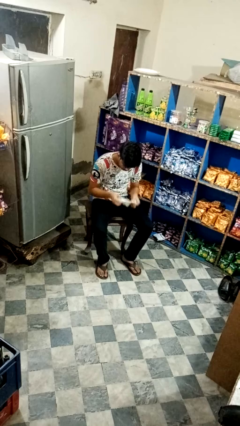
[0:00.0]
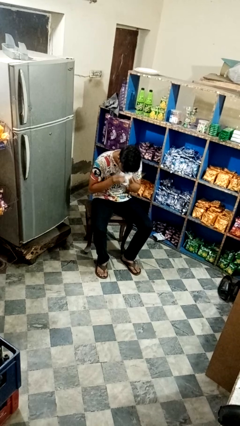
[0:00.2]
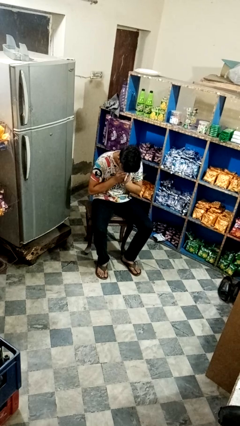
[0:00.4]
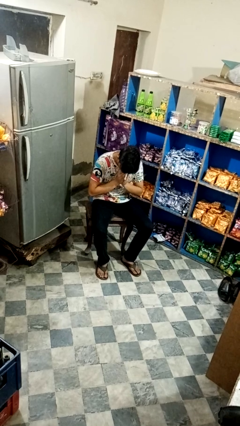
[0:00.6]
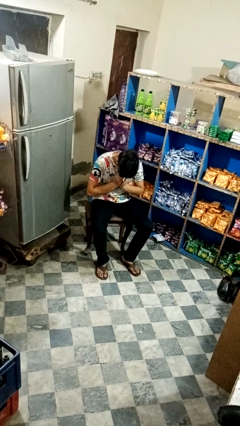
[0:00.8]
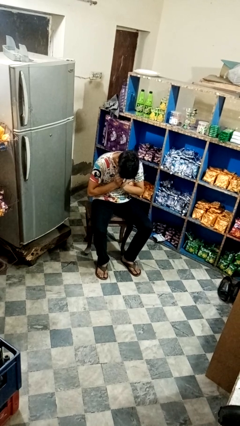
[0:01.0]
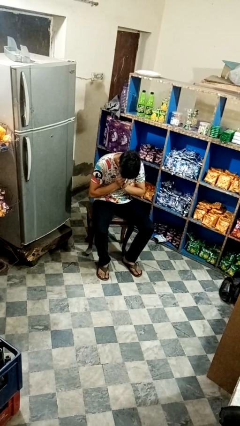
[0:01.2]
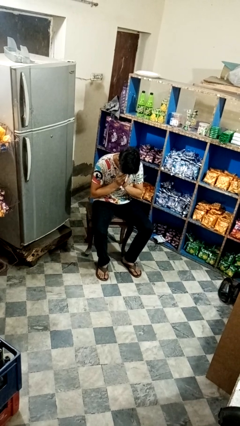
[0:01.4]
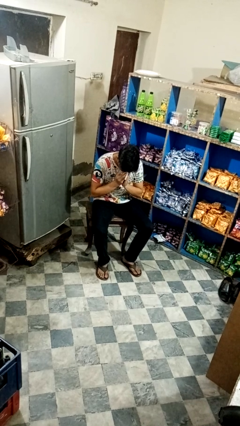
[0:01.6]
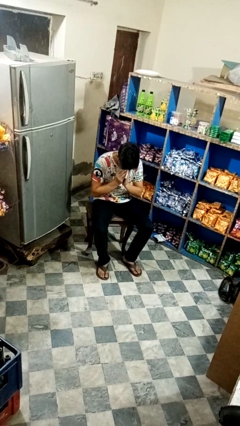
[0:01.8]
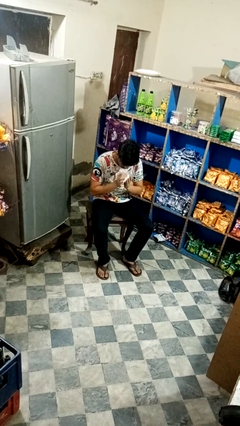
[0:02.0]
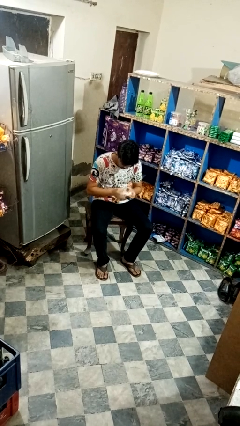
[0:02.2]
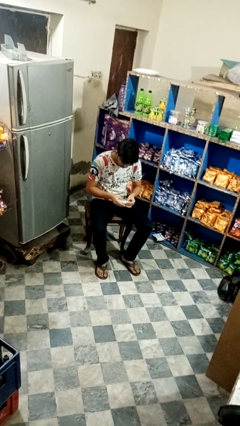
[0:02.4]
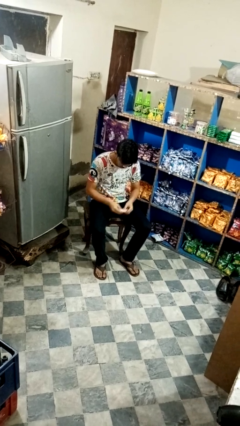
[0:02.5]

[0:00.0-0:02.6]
person blows nose

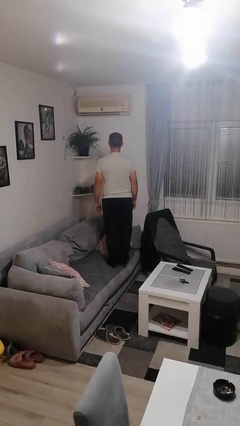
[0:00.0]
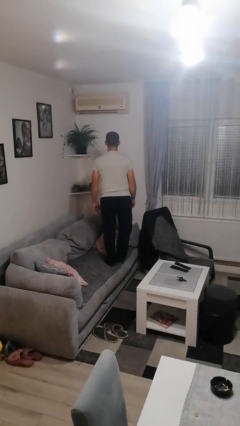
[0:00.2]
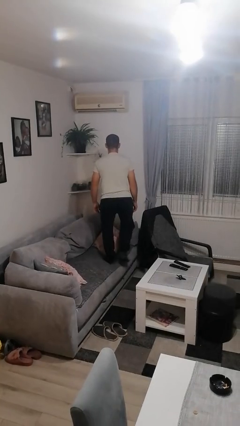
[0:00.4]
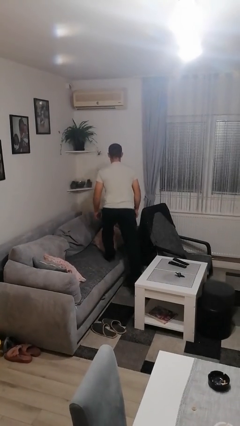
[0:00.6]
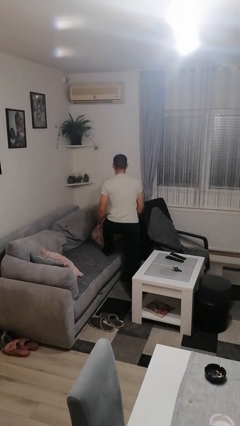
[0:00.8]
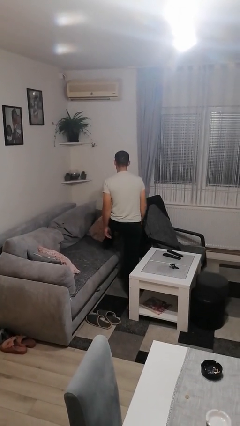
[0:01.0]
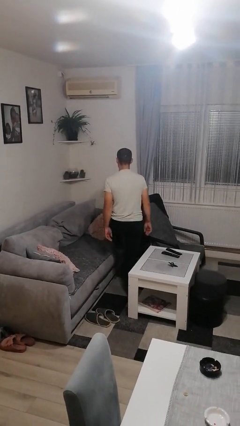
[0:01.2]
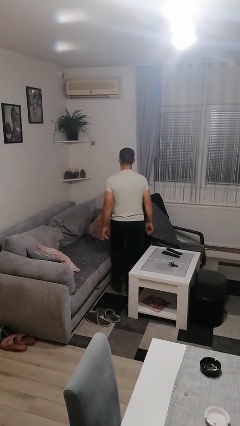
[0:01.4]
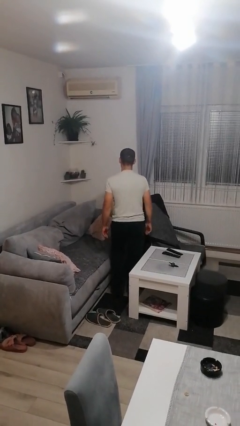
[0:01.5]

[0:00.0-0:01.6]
person climbs off couch

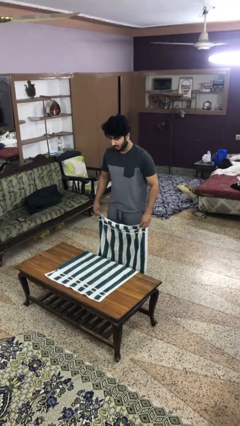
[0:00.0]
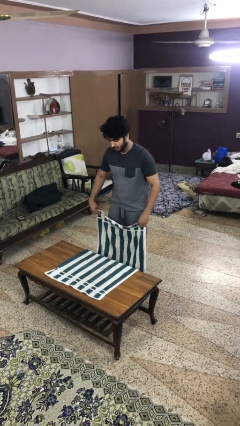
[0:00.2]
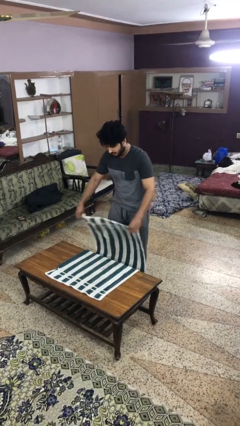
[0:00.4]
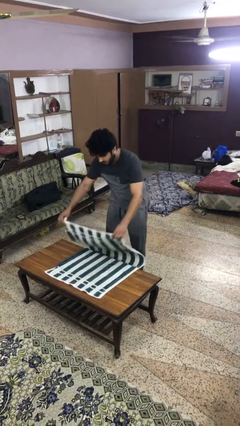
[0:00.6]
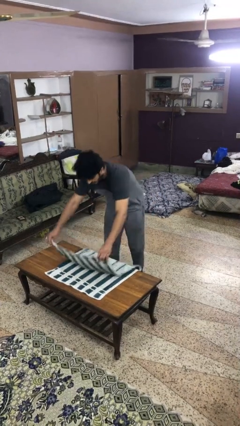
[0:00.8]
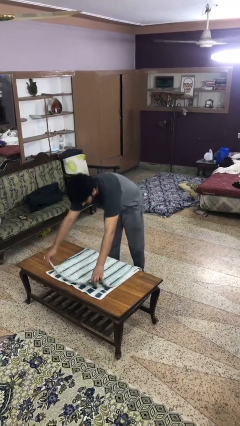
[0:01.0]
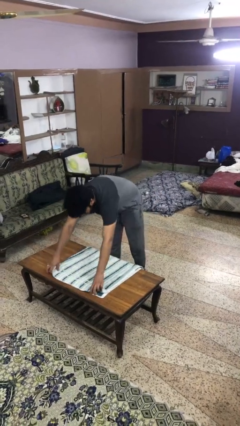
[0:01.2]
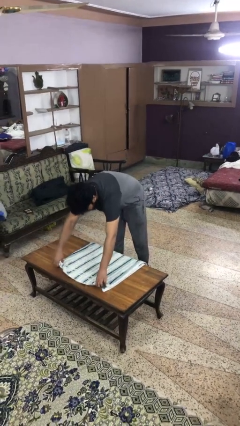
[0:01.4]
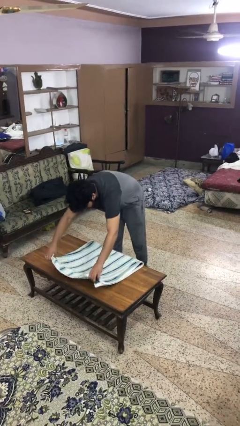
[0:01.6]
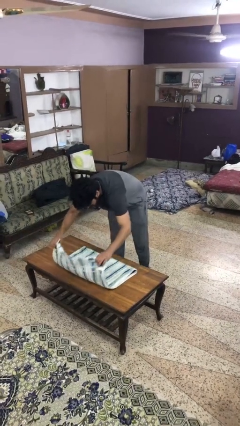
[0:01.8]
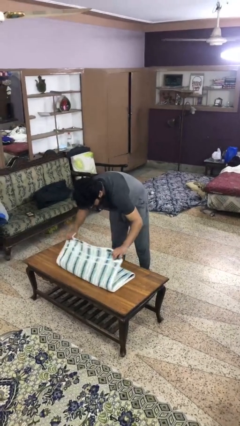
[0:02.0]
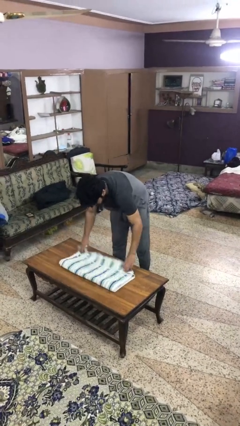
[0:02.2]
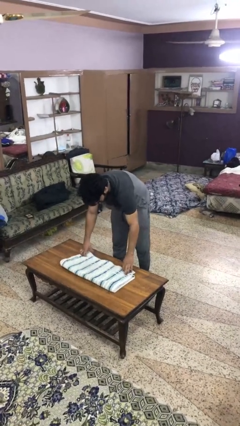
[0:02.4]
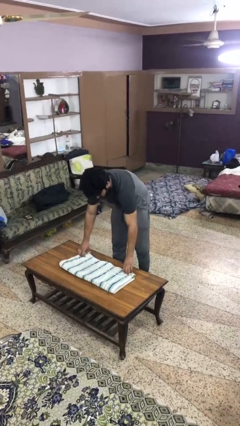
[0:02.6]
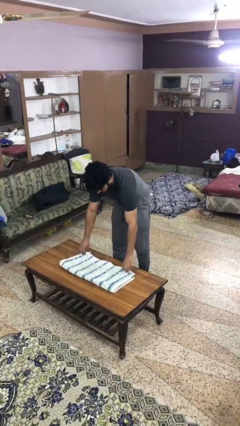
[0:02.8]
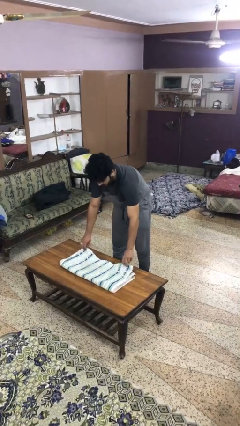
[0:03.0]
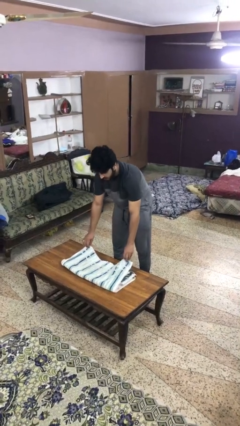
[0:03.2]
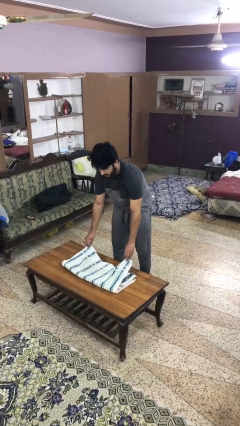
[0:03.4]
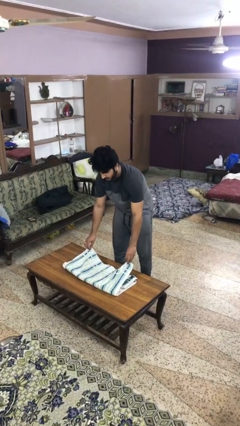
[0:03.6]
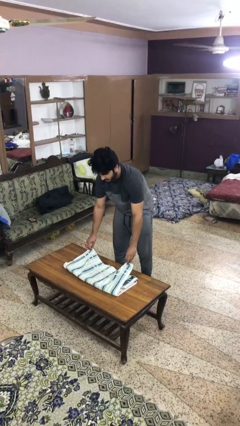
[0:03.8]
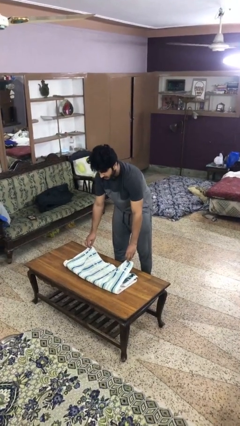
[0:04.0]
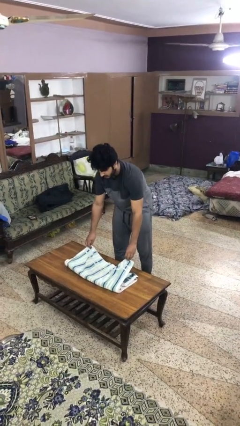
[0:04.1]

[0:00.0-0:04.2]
person folds towel

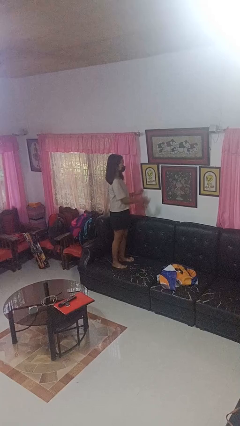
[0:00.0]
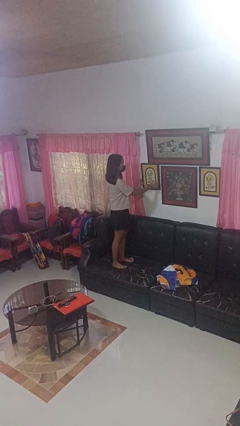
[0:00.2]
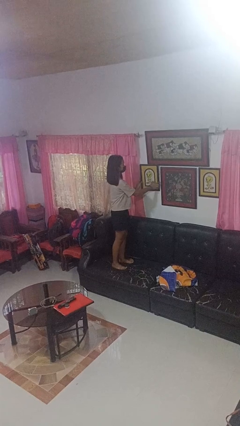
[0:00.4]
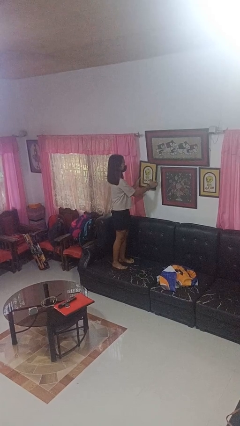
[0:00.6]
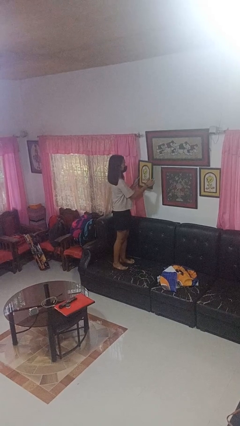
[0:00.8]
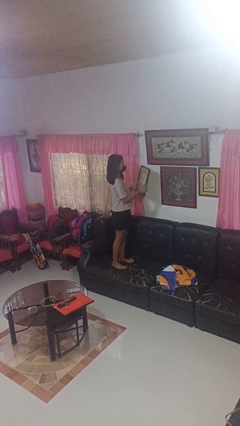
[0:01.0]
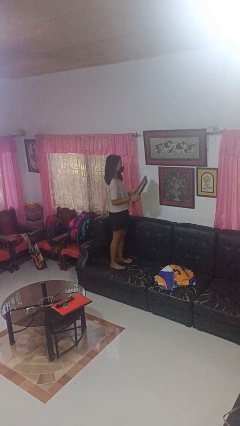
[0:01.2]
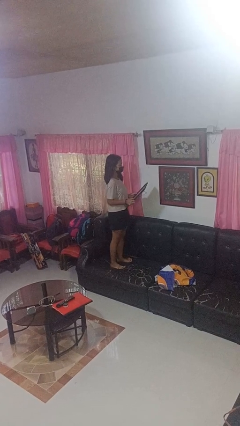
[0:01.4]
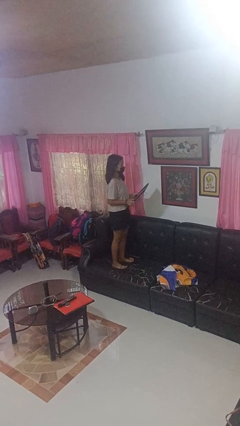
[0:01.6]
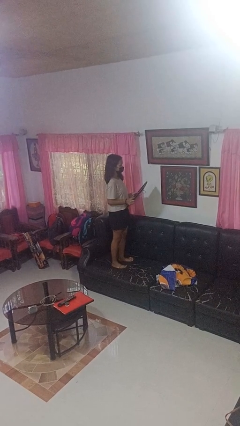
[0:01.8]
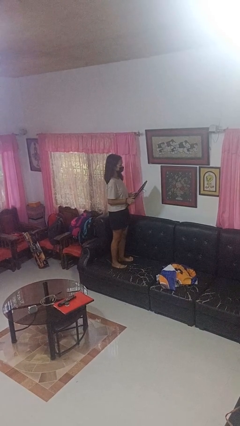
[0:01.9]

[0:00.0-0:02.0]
person takes down picture frame

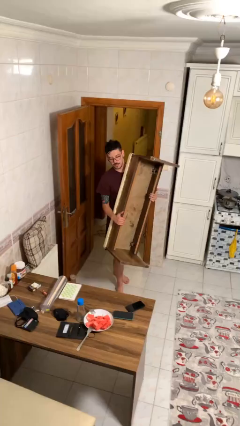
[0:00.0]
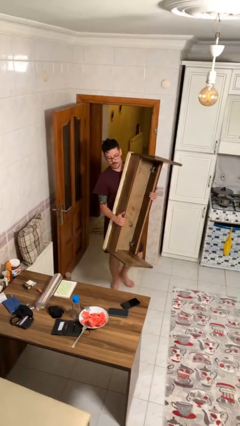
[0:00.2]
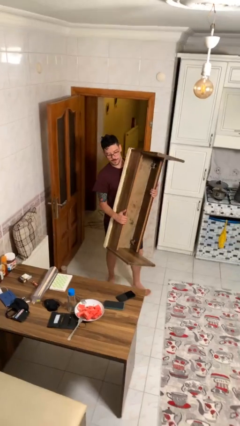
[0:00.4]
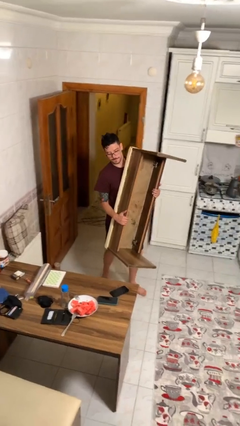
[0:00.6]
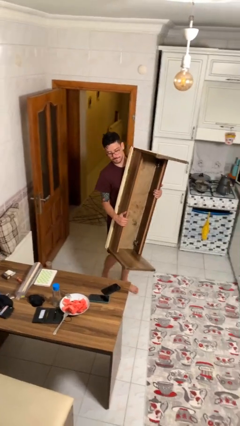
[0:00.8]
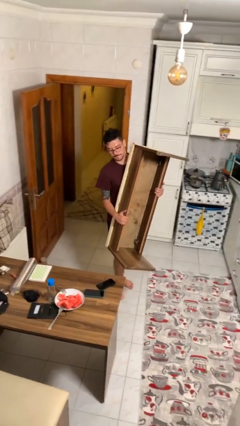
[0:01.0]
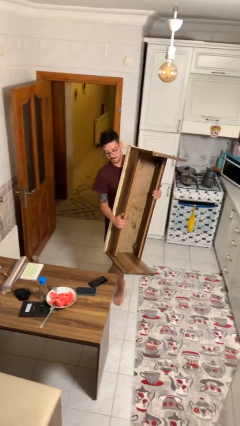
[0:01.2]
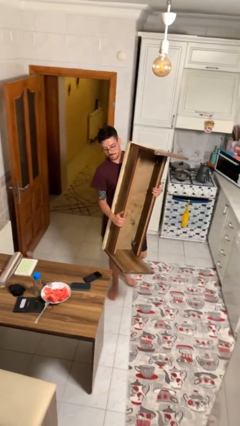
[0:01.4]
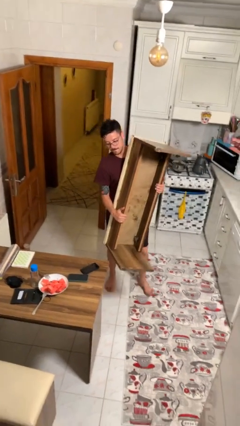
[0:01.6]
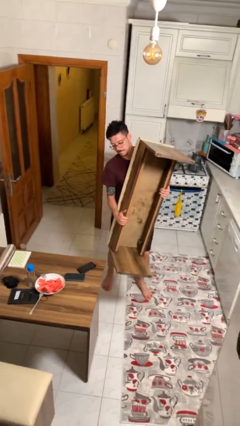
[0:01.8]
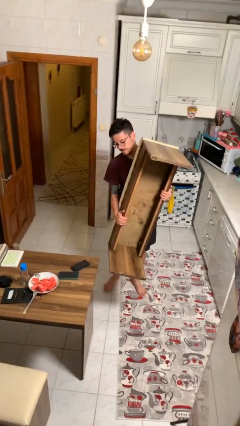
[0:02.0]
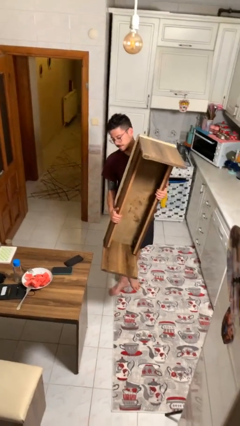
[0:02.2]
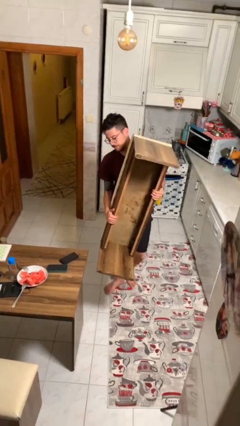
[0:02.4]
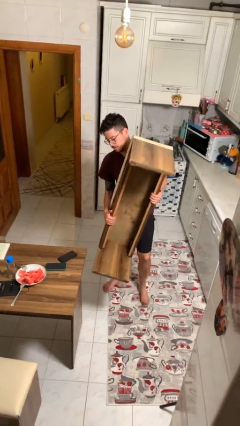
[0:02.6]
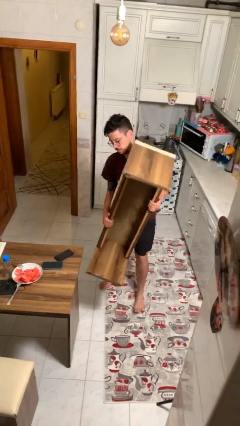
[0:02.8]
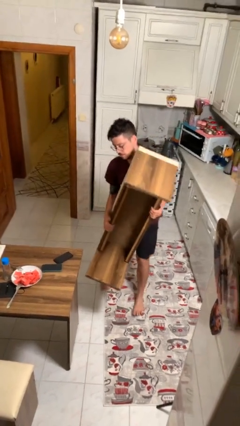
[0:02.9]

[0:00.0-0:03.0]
person carries heavy object

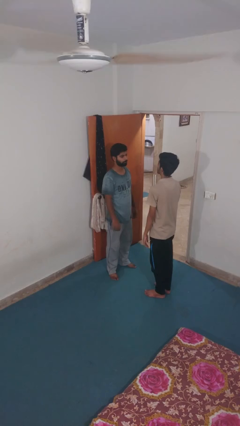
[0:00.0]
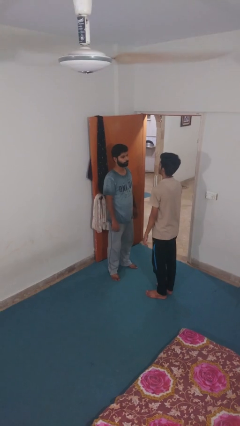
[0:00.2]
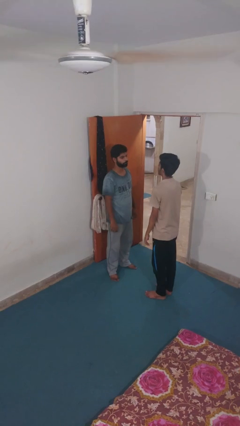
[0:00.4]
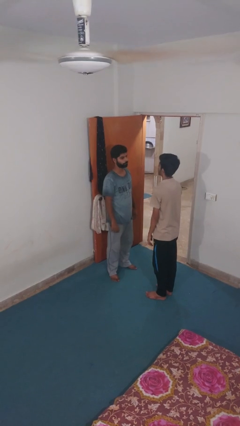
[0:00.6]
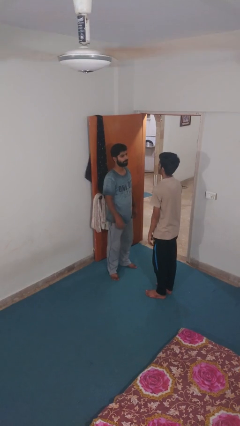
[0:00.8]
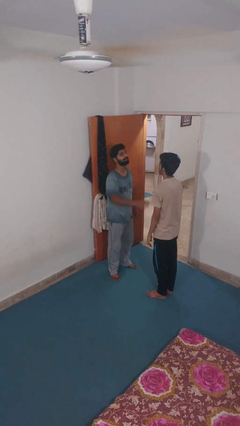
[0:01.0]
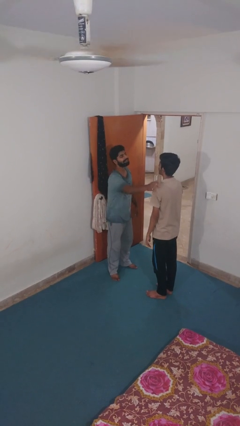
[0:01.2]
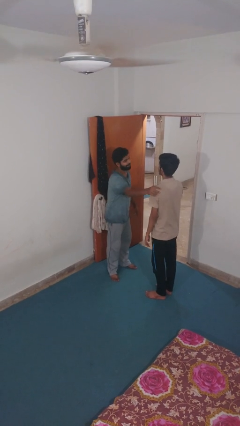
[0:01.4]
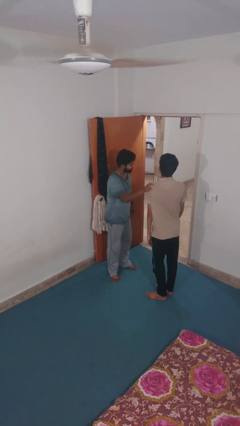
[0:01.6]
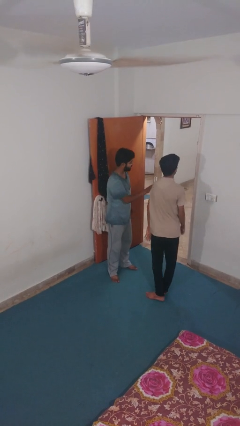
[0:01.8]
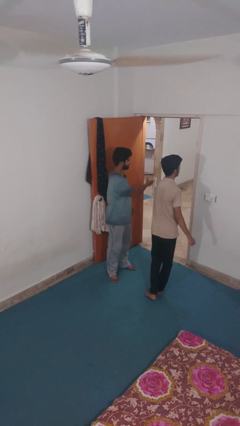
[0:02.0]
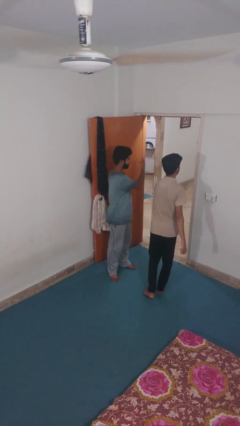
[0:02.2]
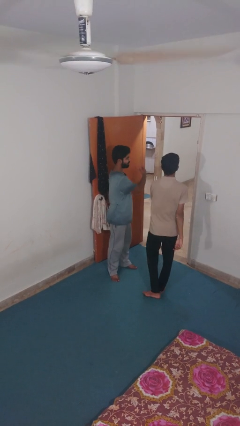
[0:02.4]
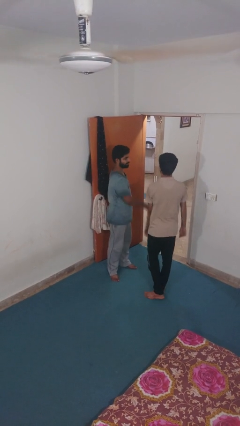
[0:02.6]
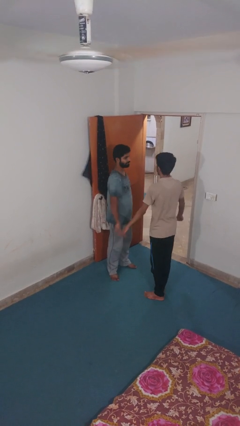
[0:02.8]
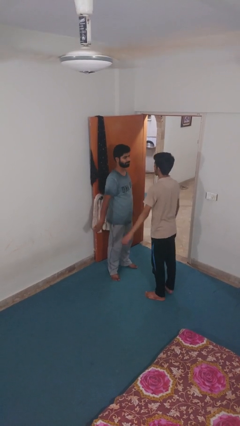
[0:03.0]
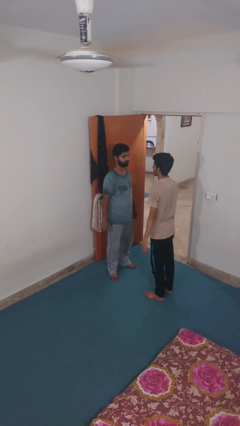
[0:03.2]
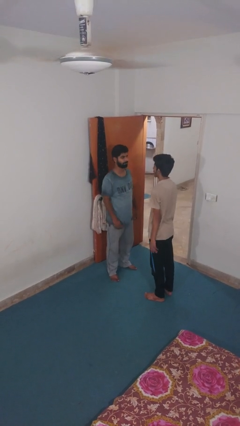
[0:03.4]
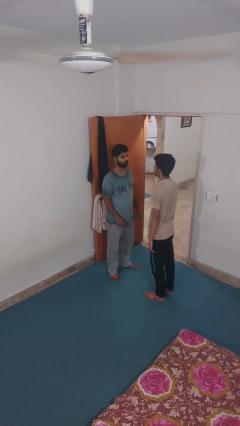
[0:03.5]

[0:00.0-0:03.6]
person shoves person

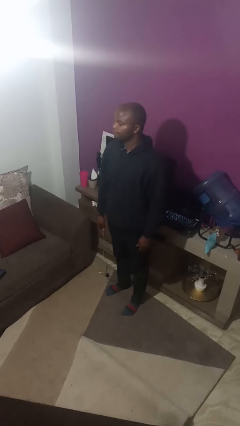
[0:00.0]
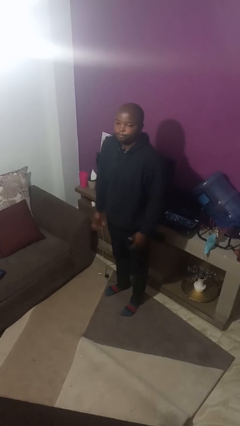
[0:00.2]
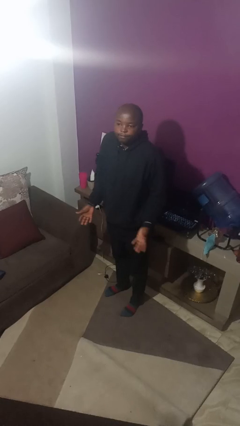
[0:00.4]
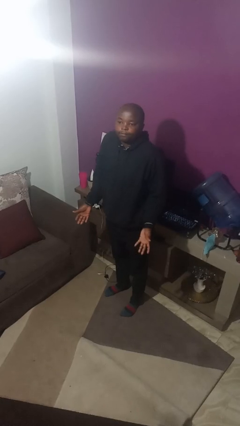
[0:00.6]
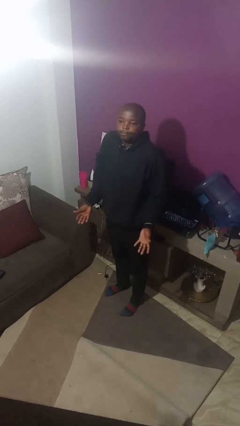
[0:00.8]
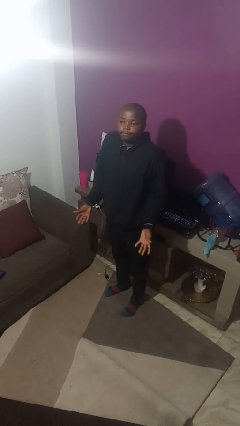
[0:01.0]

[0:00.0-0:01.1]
person shrugs
